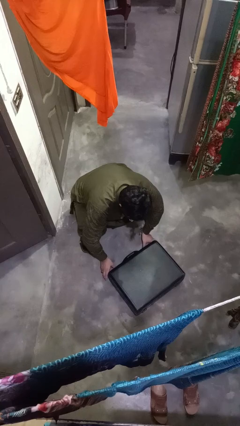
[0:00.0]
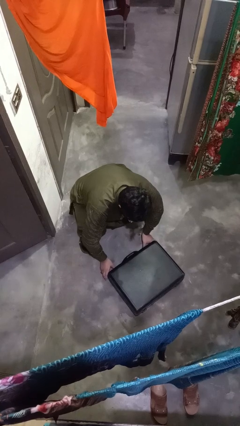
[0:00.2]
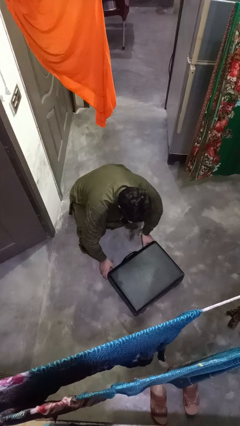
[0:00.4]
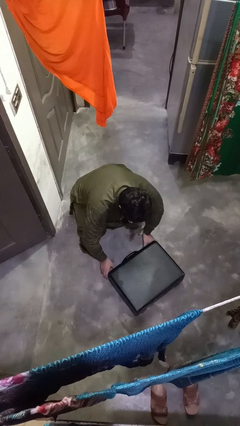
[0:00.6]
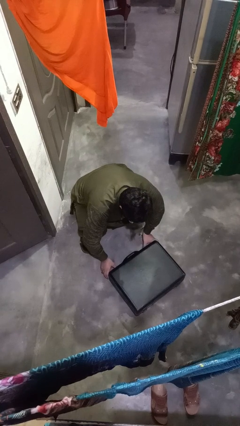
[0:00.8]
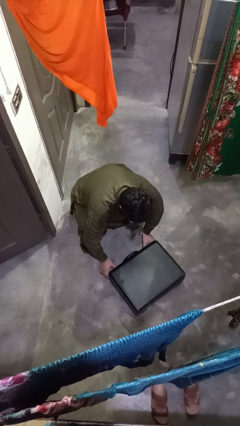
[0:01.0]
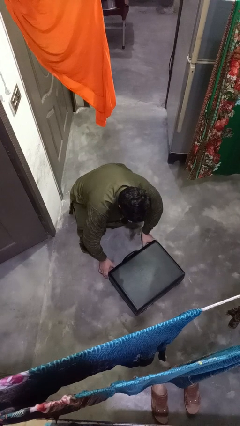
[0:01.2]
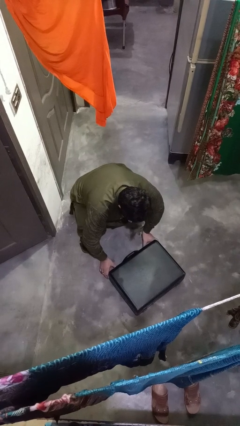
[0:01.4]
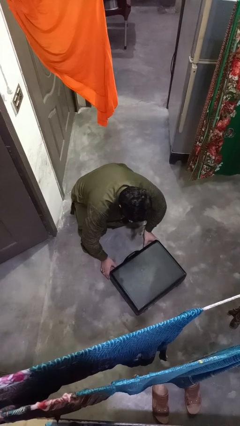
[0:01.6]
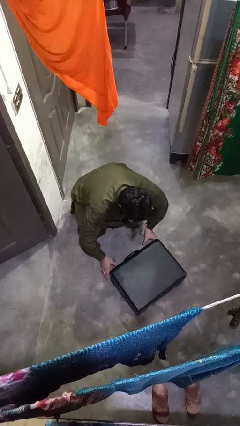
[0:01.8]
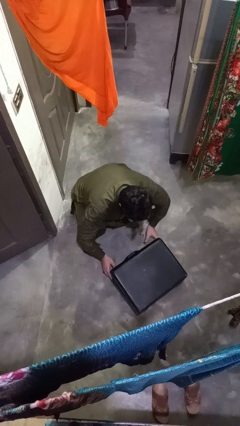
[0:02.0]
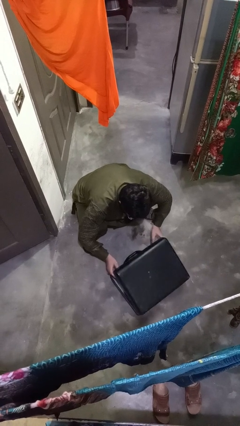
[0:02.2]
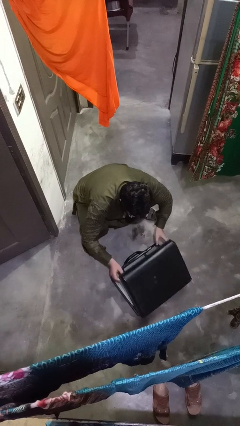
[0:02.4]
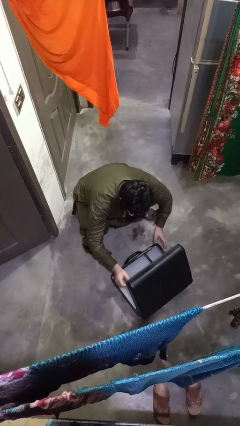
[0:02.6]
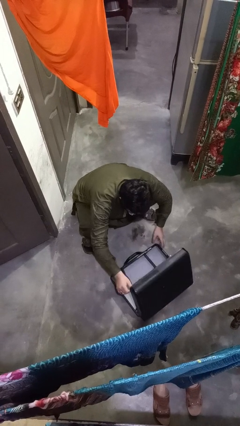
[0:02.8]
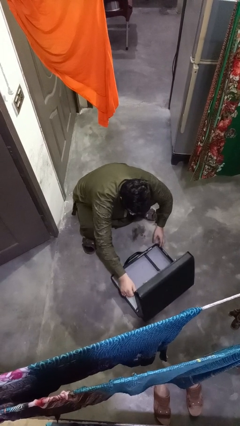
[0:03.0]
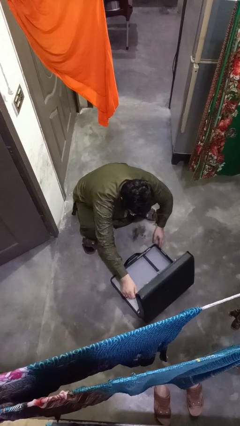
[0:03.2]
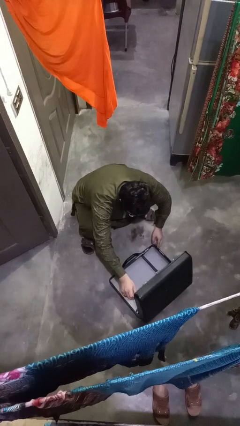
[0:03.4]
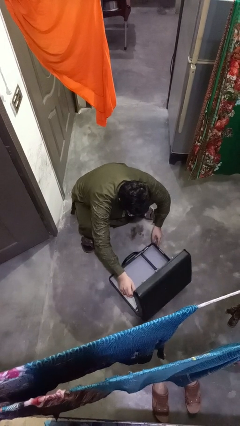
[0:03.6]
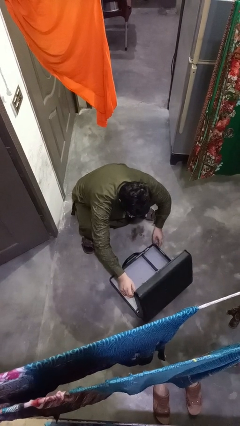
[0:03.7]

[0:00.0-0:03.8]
person opens suitcase

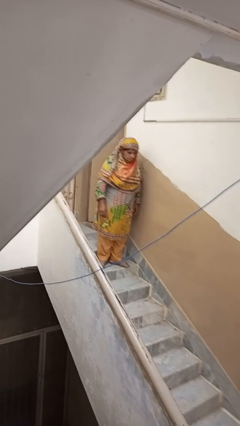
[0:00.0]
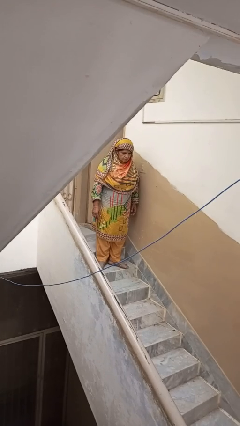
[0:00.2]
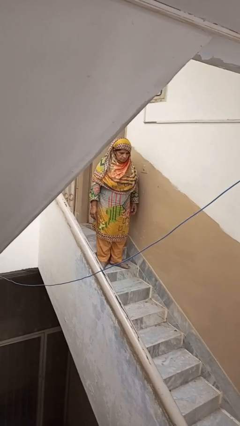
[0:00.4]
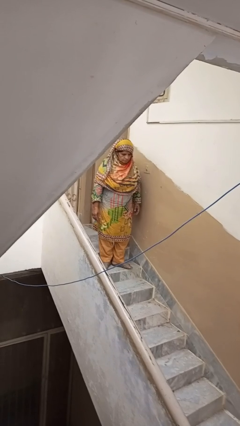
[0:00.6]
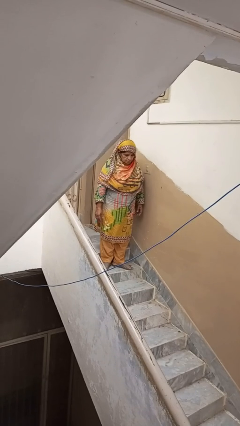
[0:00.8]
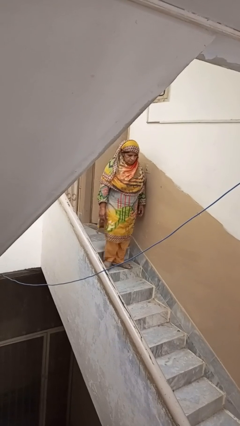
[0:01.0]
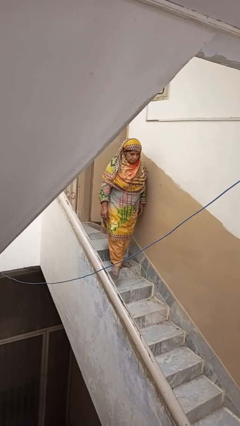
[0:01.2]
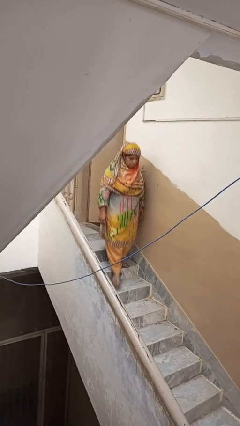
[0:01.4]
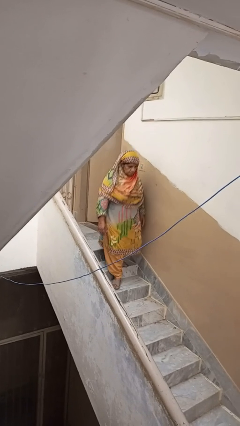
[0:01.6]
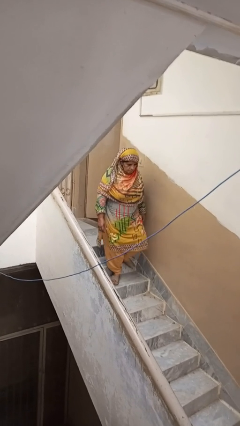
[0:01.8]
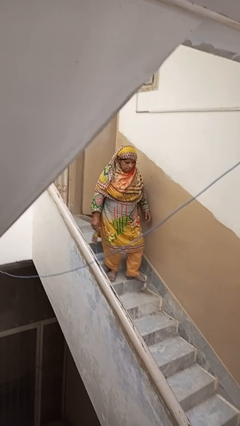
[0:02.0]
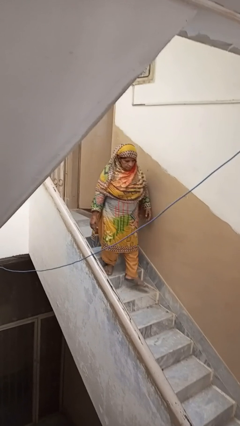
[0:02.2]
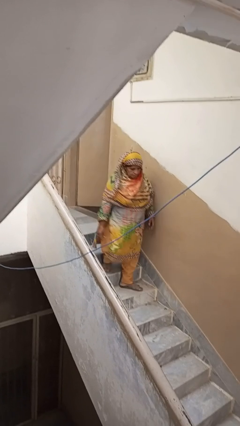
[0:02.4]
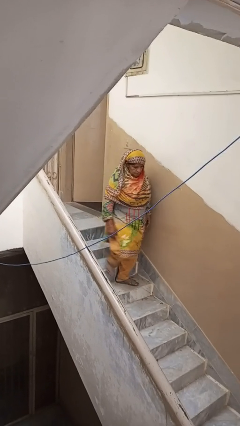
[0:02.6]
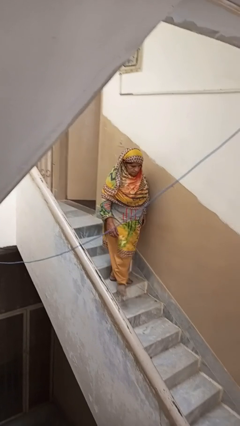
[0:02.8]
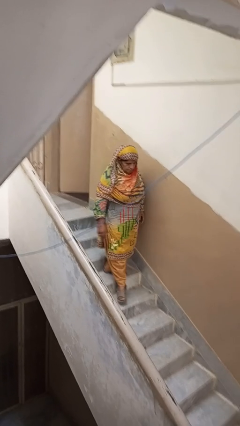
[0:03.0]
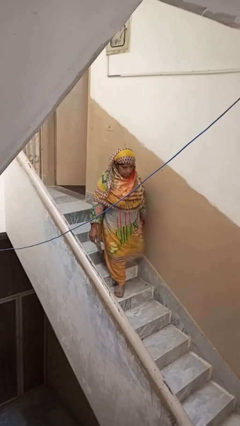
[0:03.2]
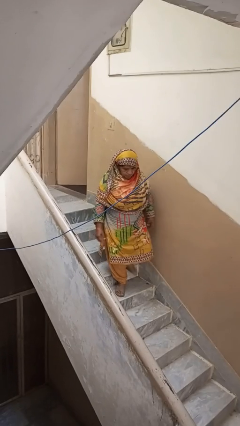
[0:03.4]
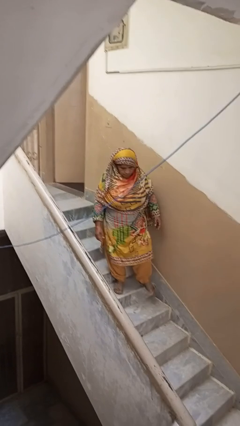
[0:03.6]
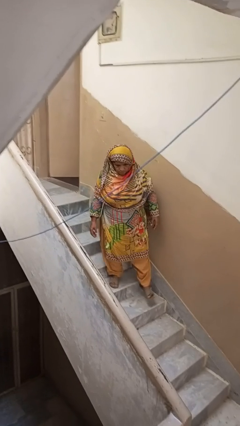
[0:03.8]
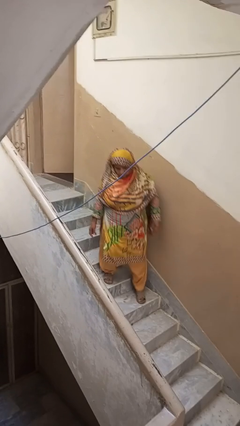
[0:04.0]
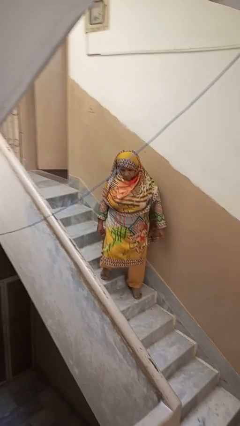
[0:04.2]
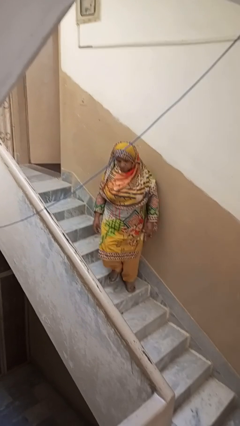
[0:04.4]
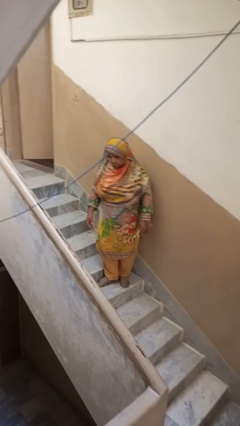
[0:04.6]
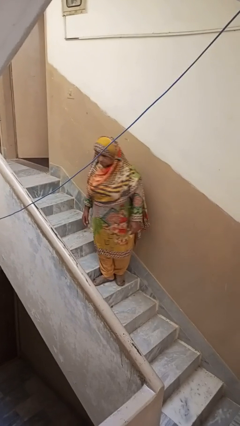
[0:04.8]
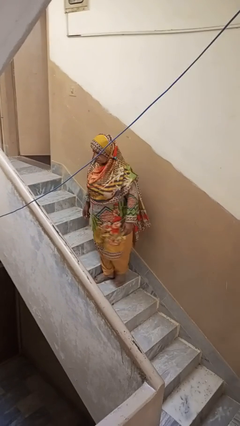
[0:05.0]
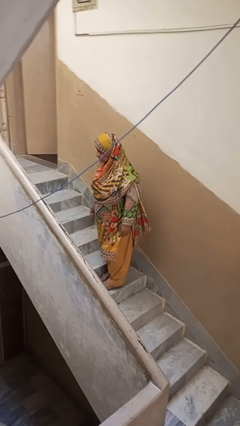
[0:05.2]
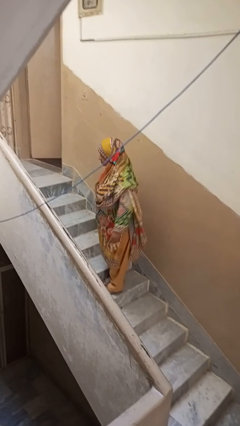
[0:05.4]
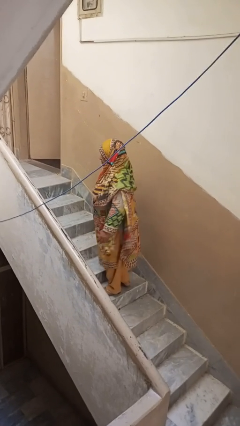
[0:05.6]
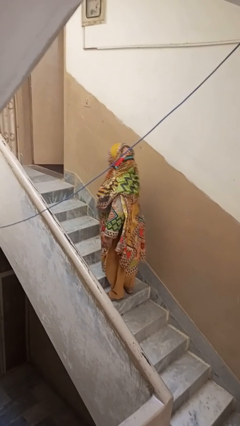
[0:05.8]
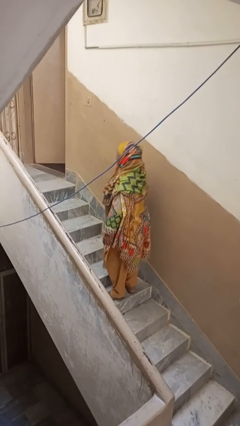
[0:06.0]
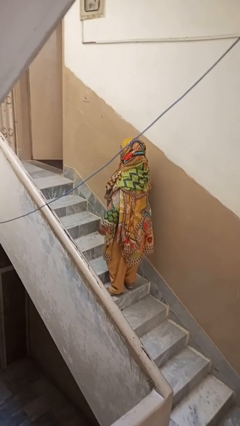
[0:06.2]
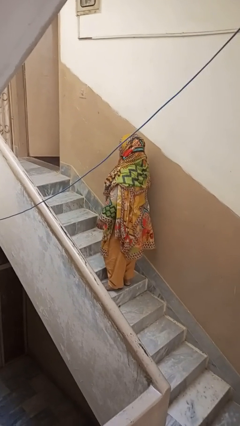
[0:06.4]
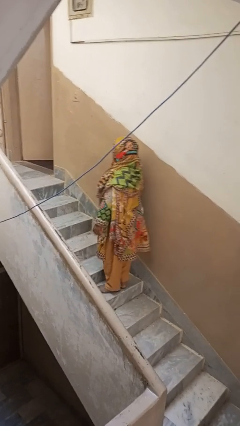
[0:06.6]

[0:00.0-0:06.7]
person climbs down stairs

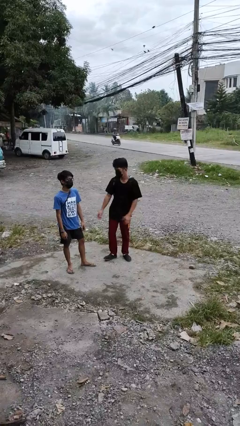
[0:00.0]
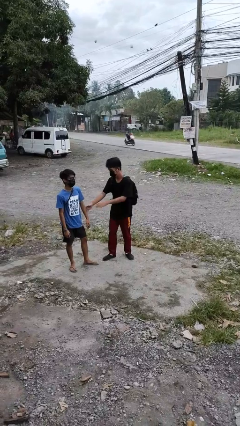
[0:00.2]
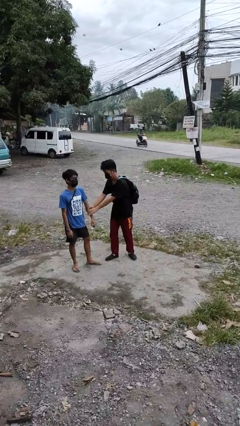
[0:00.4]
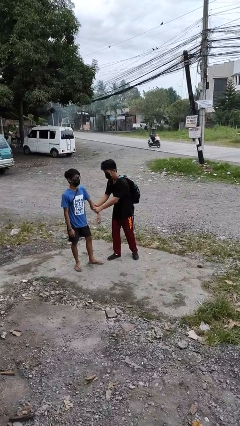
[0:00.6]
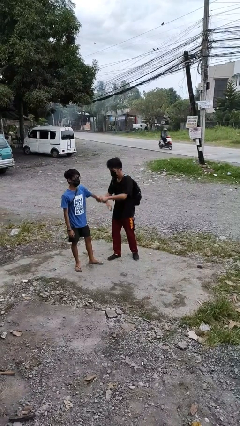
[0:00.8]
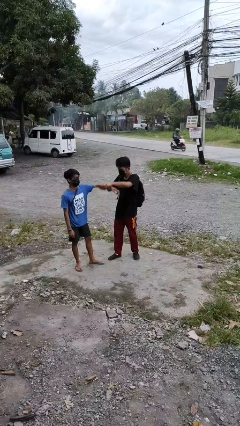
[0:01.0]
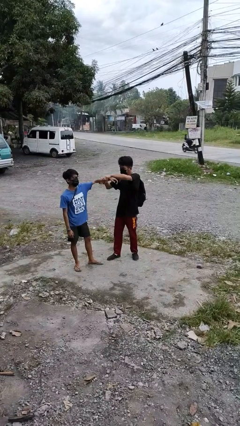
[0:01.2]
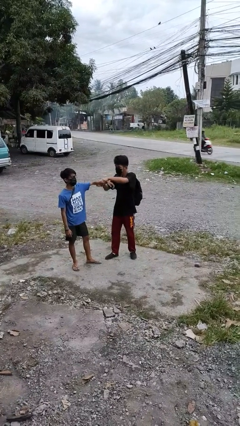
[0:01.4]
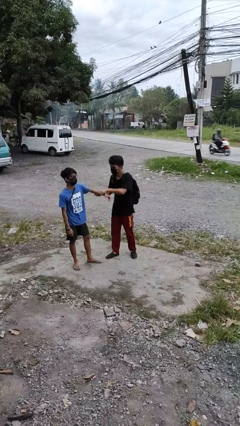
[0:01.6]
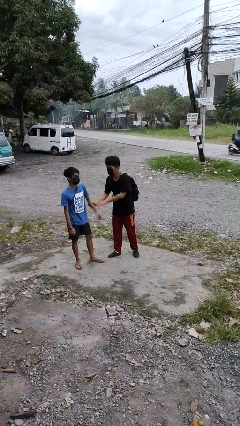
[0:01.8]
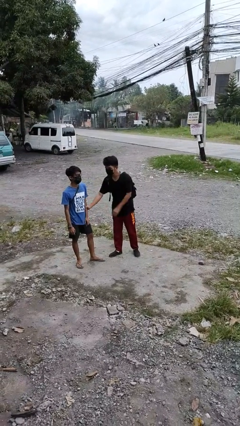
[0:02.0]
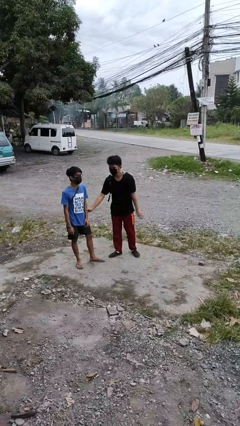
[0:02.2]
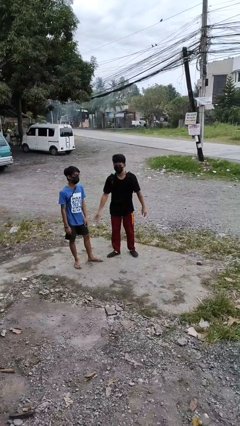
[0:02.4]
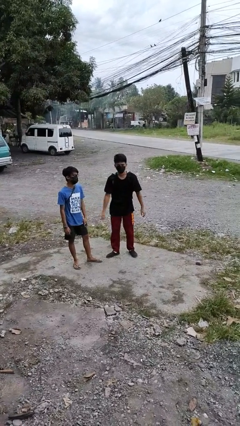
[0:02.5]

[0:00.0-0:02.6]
person grabs person by forearm

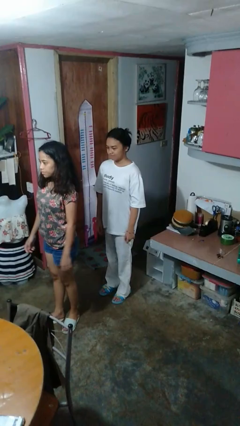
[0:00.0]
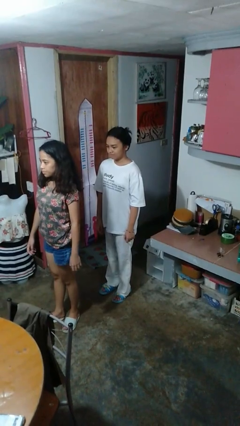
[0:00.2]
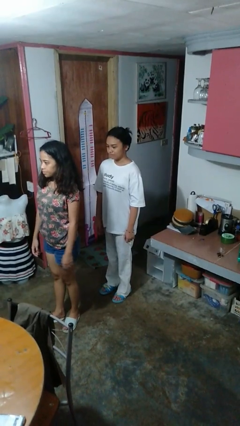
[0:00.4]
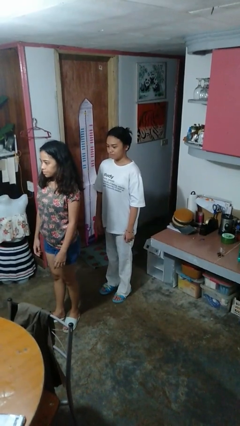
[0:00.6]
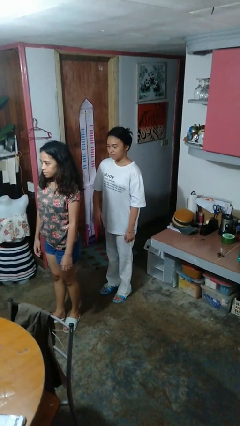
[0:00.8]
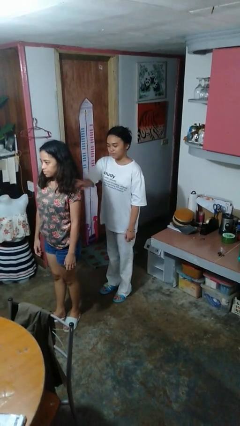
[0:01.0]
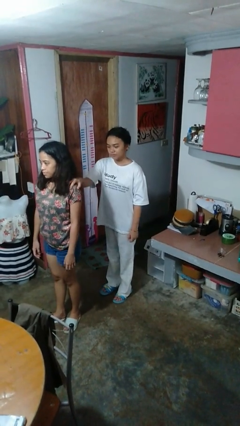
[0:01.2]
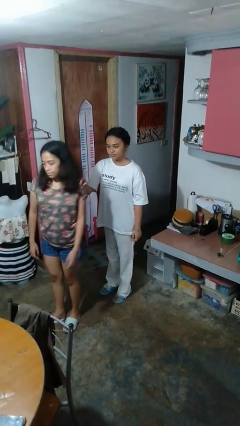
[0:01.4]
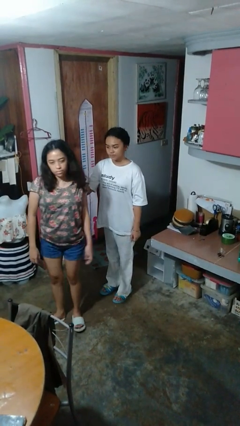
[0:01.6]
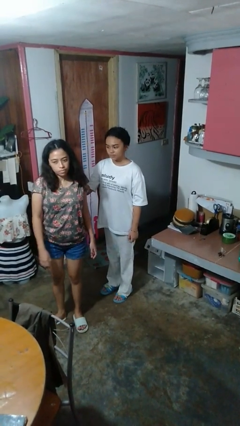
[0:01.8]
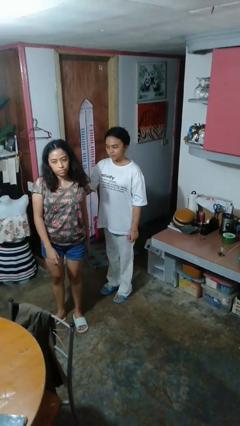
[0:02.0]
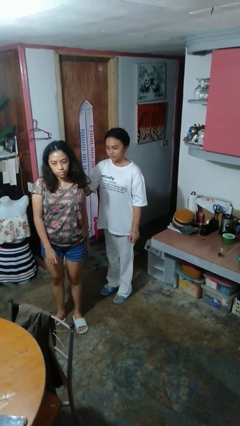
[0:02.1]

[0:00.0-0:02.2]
person grabs person by shoulder

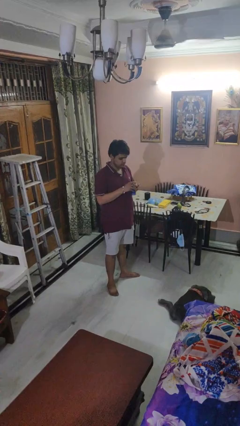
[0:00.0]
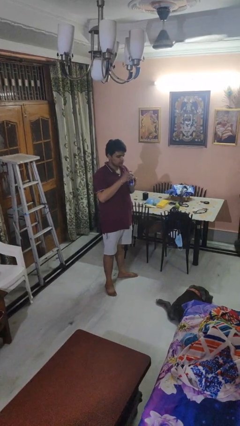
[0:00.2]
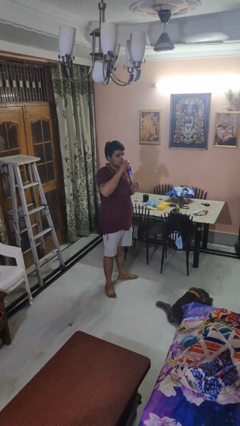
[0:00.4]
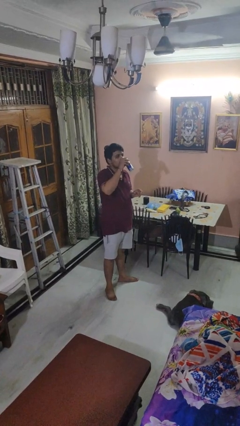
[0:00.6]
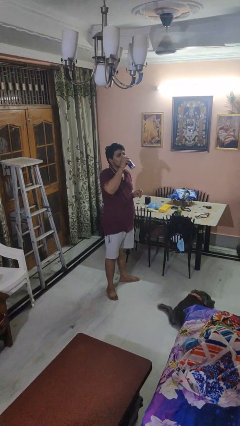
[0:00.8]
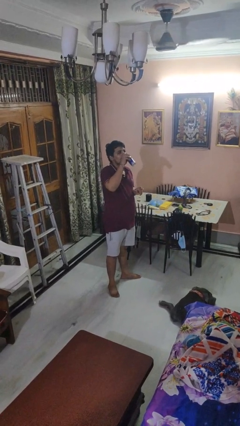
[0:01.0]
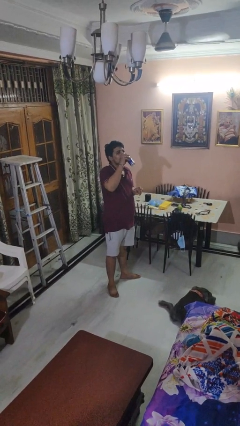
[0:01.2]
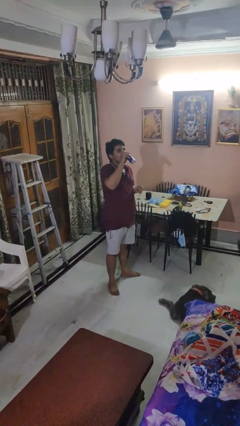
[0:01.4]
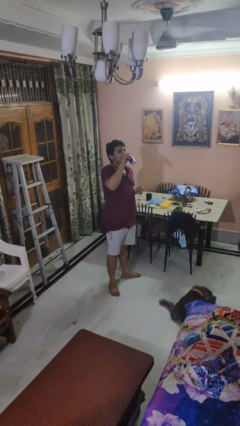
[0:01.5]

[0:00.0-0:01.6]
person drinks from beverage can

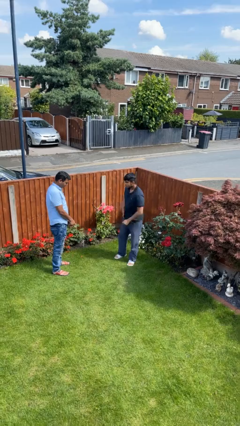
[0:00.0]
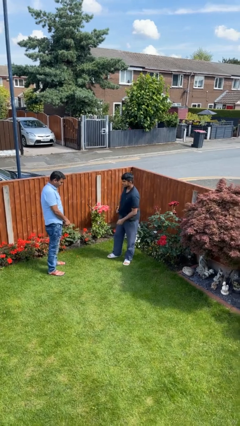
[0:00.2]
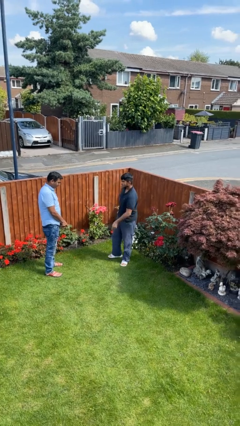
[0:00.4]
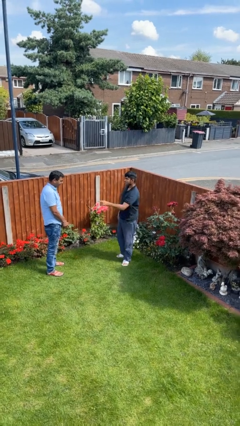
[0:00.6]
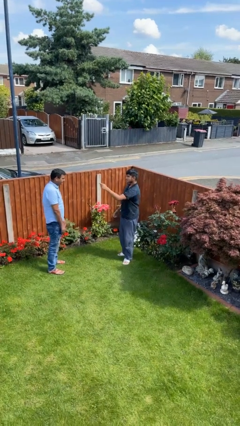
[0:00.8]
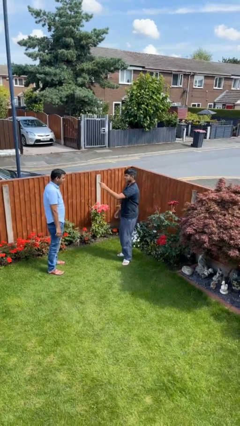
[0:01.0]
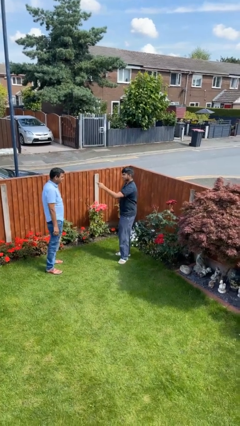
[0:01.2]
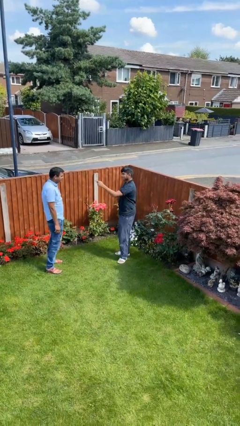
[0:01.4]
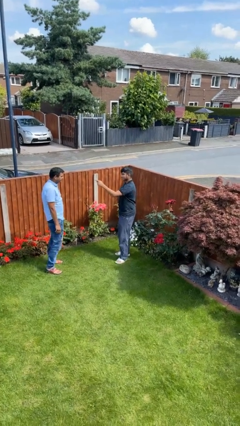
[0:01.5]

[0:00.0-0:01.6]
person points at person
